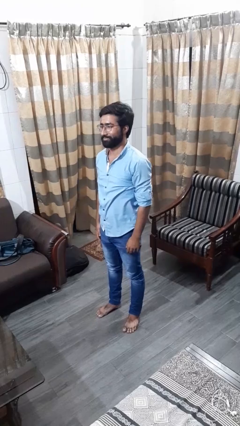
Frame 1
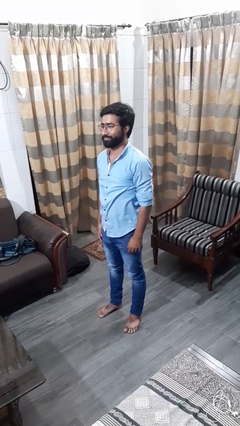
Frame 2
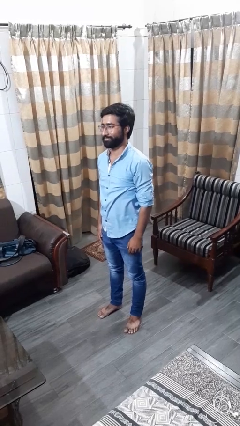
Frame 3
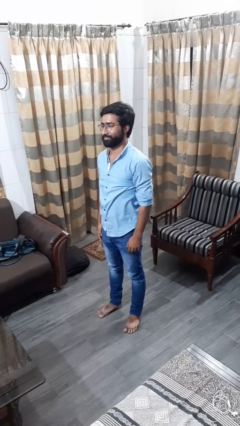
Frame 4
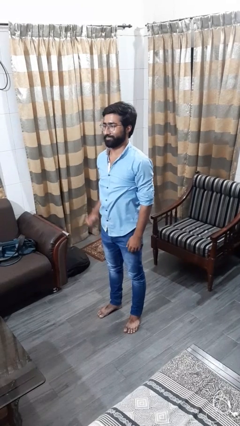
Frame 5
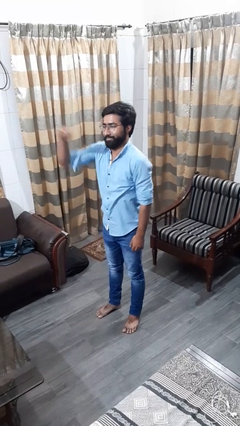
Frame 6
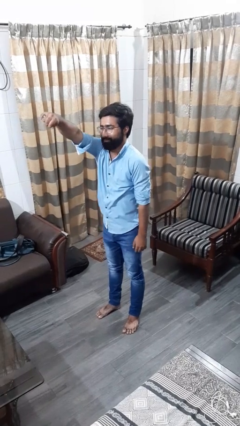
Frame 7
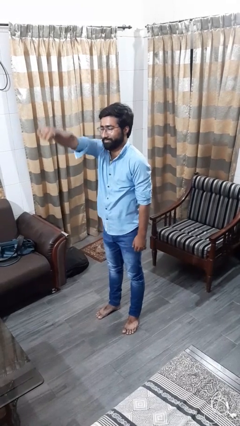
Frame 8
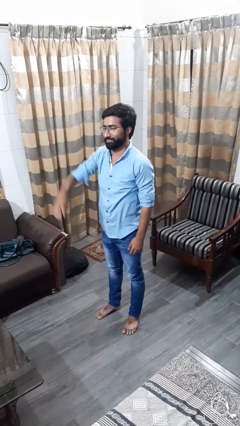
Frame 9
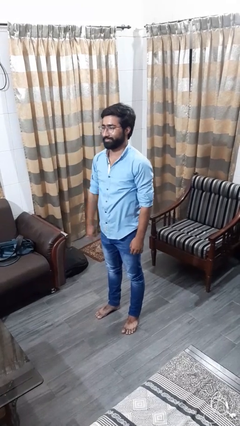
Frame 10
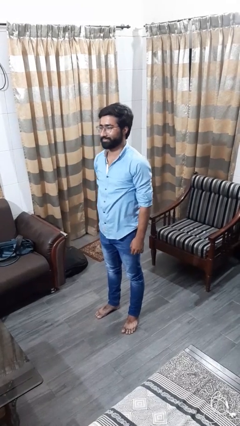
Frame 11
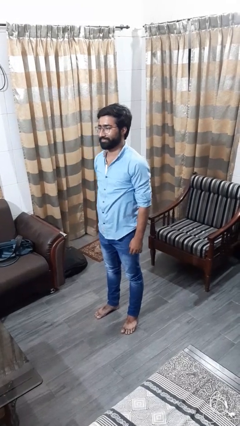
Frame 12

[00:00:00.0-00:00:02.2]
person punches

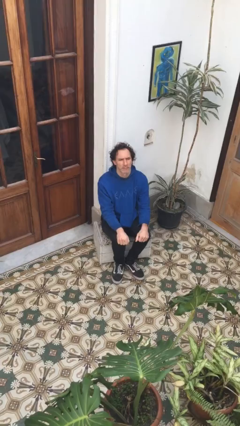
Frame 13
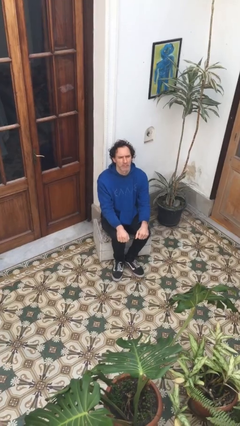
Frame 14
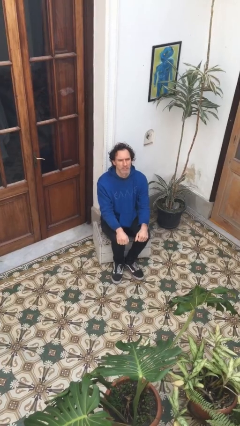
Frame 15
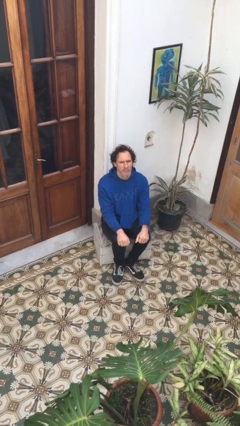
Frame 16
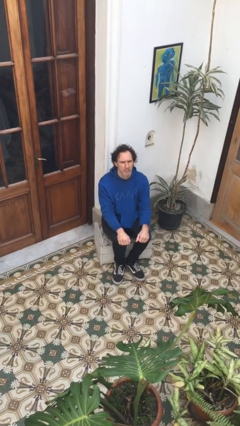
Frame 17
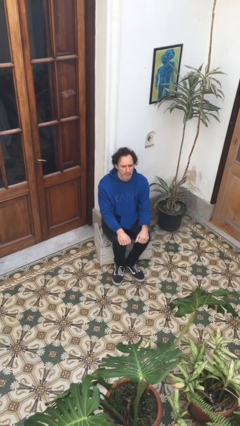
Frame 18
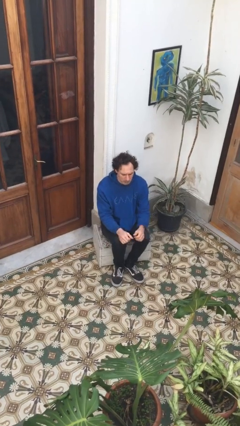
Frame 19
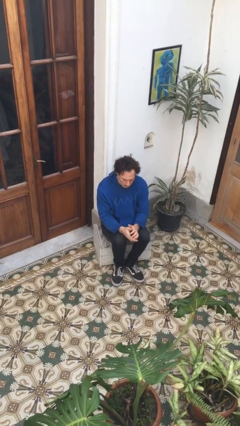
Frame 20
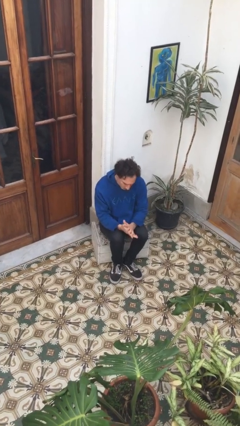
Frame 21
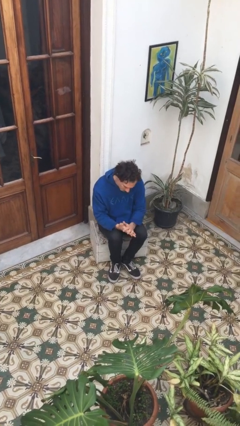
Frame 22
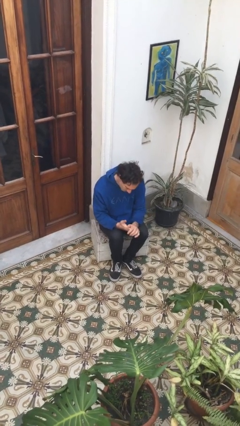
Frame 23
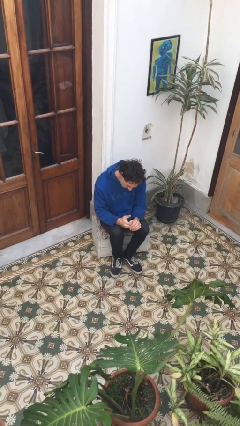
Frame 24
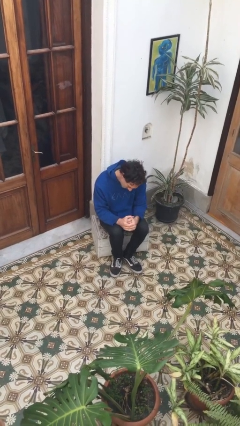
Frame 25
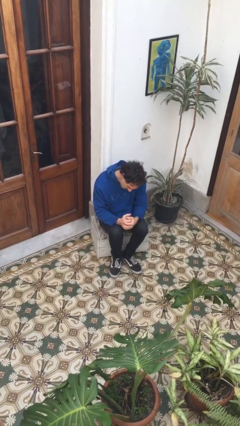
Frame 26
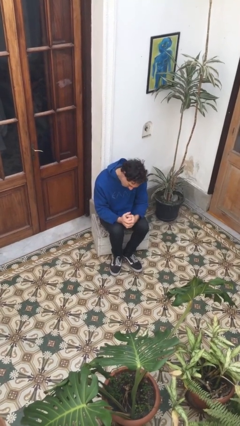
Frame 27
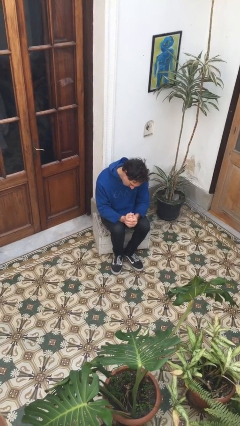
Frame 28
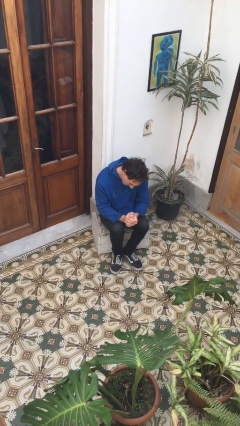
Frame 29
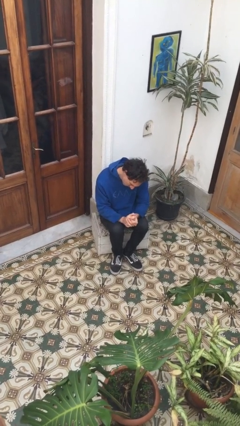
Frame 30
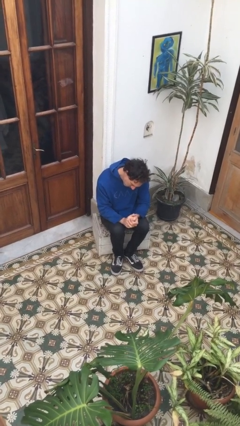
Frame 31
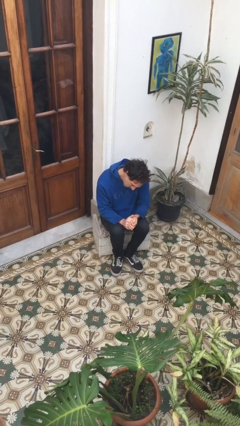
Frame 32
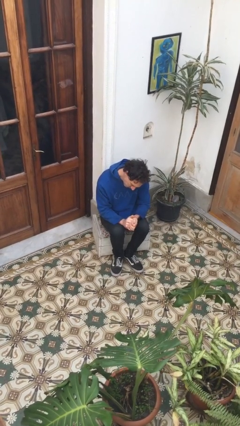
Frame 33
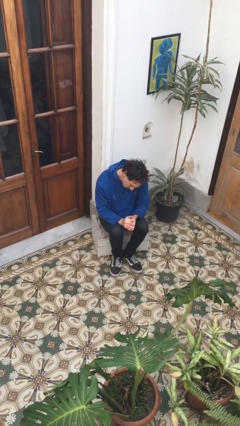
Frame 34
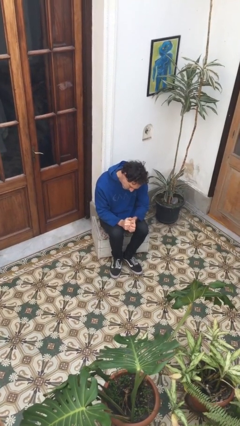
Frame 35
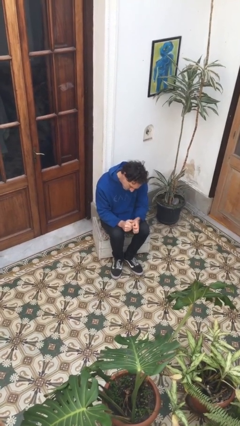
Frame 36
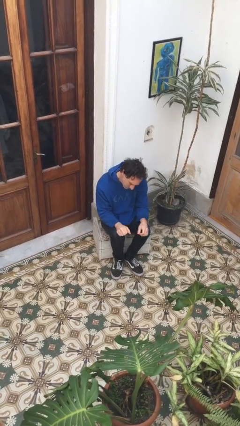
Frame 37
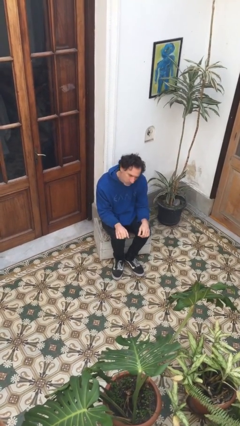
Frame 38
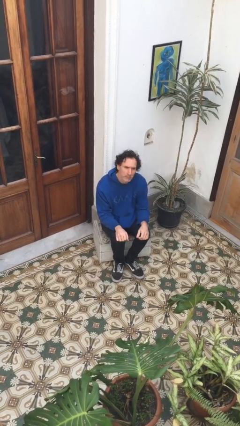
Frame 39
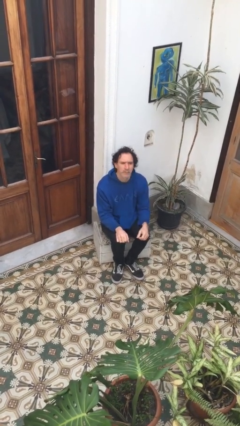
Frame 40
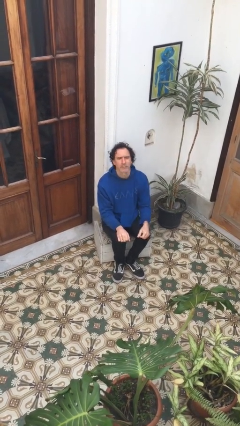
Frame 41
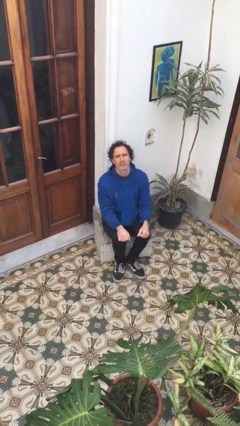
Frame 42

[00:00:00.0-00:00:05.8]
person looks at hands in lap

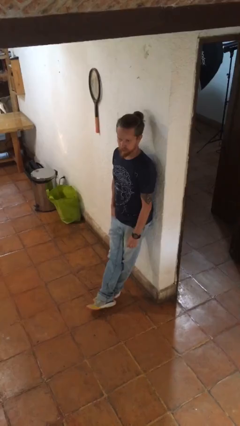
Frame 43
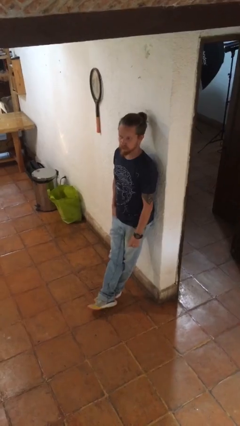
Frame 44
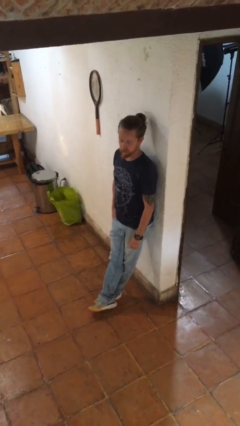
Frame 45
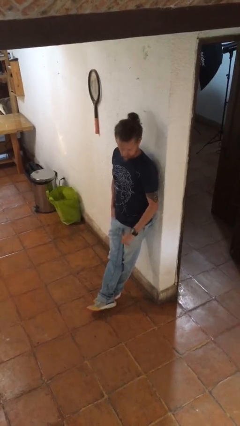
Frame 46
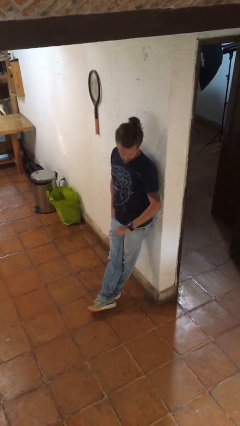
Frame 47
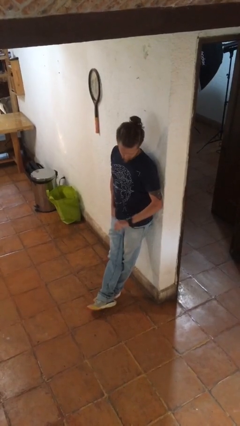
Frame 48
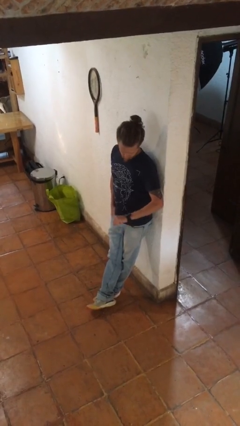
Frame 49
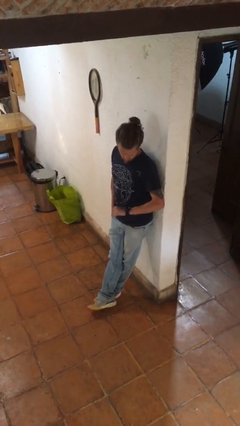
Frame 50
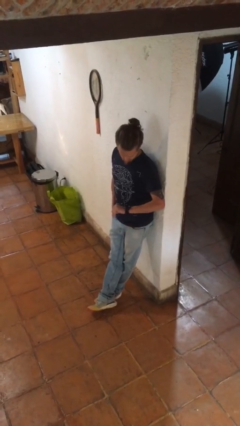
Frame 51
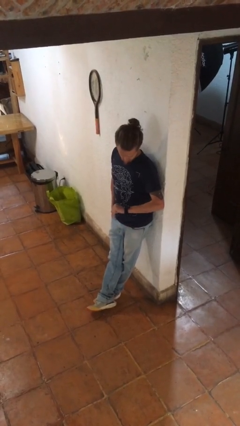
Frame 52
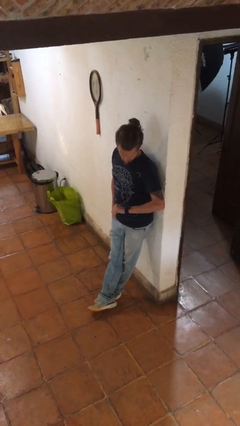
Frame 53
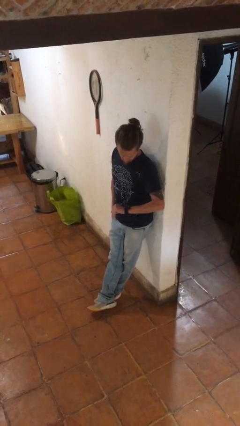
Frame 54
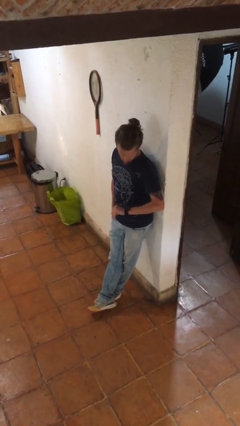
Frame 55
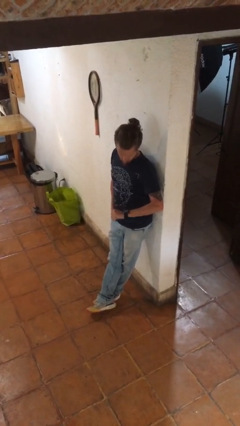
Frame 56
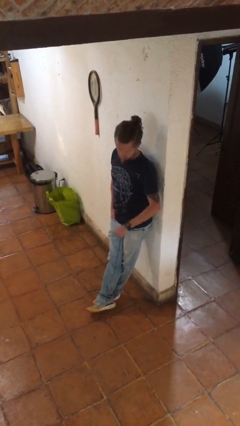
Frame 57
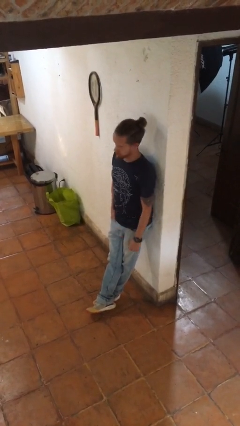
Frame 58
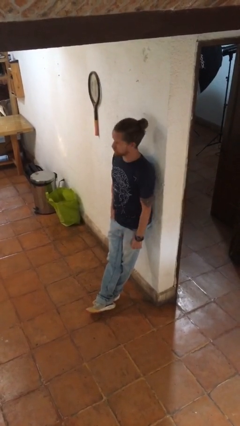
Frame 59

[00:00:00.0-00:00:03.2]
person looks at wristwatch

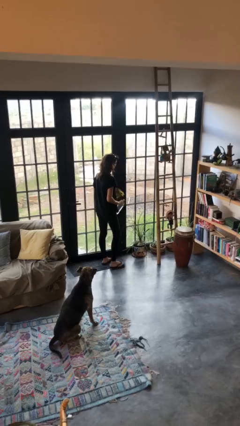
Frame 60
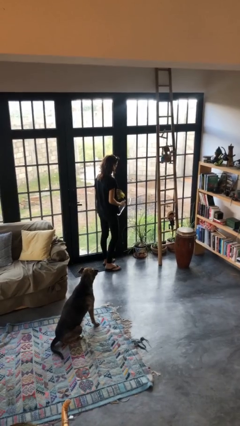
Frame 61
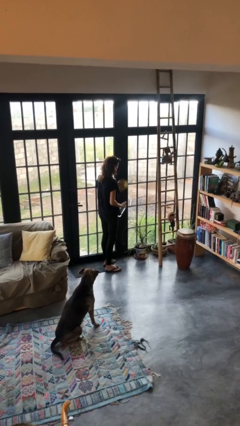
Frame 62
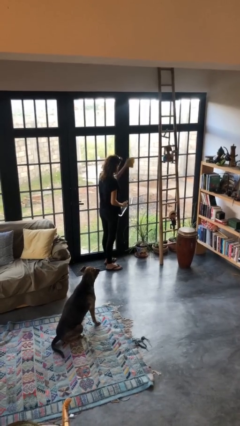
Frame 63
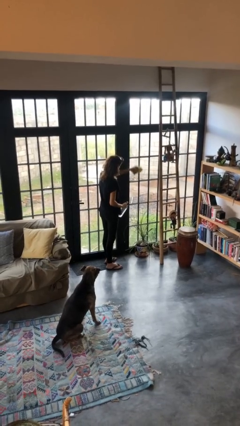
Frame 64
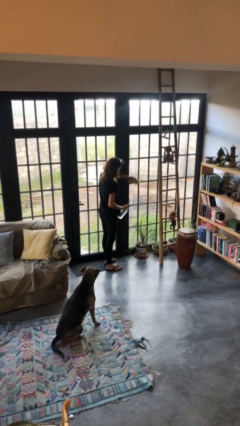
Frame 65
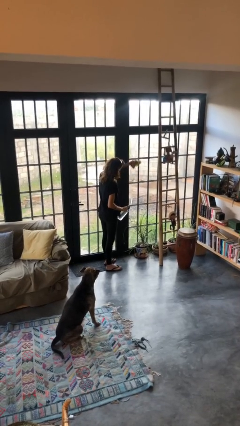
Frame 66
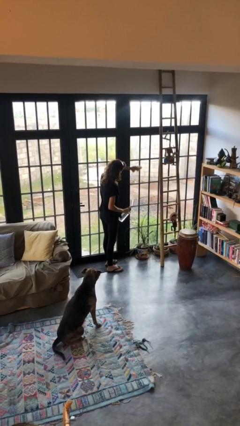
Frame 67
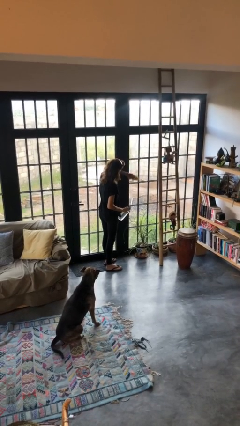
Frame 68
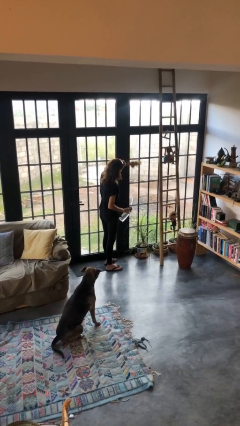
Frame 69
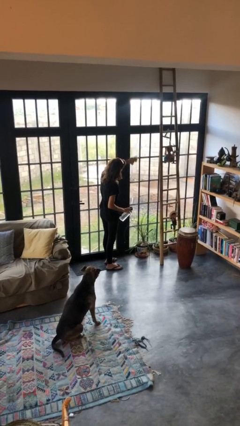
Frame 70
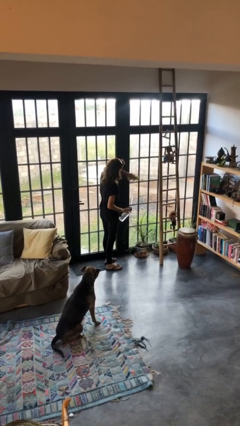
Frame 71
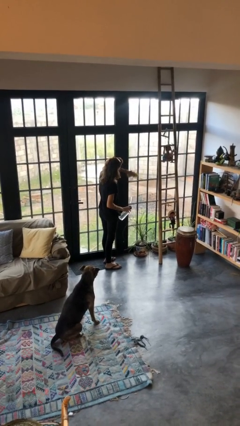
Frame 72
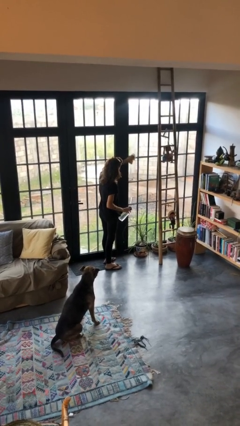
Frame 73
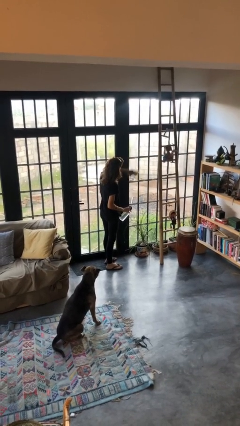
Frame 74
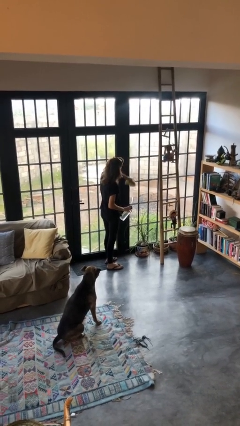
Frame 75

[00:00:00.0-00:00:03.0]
person washes window

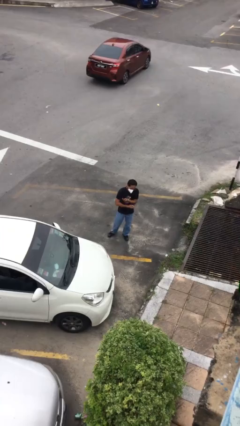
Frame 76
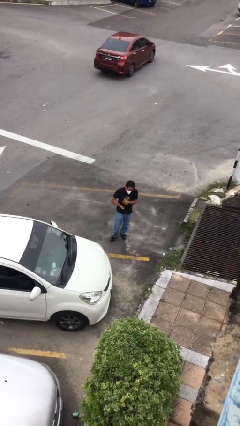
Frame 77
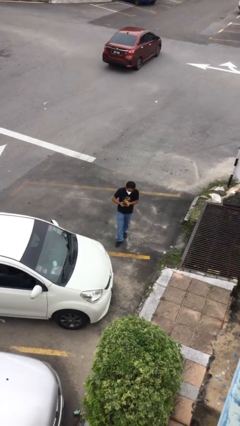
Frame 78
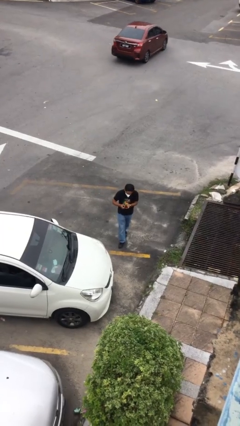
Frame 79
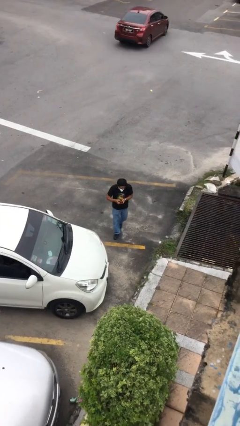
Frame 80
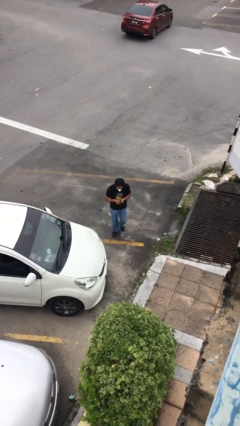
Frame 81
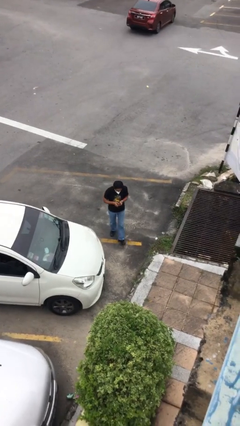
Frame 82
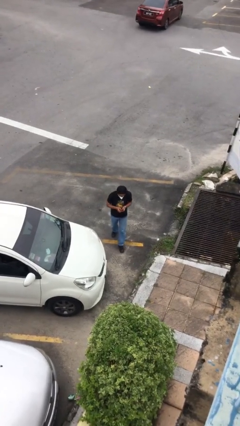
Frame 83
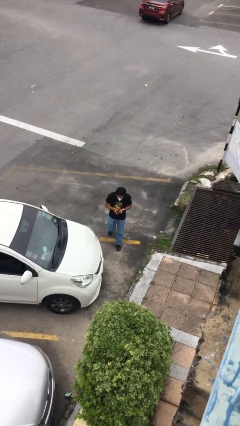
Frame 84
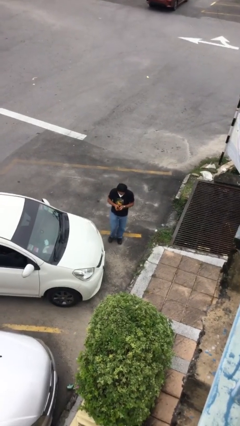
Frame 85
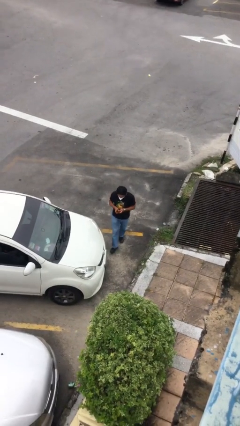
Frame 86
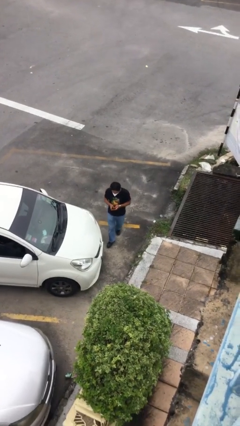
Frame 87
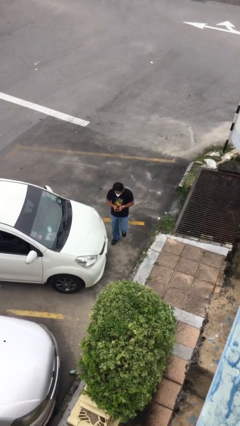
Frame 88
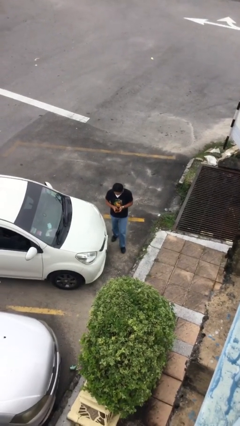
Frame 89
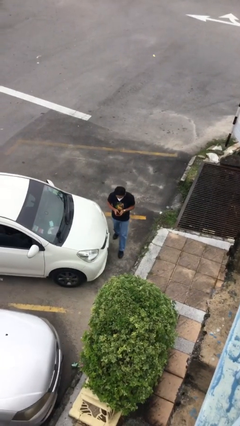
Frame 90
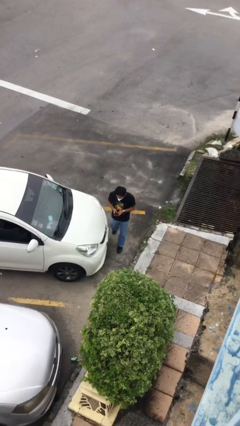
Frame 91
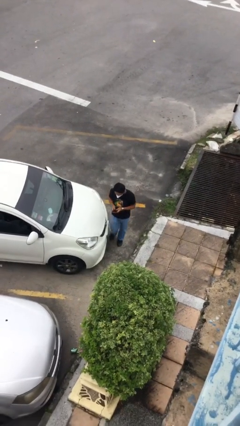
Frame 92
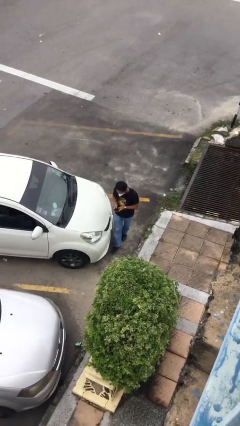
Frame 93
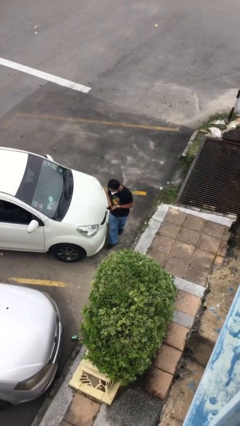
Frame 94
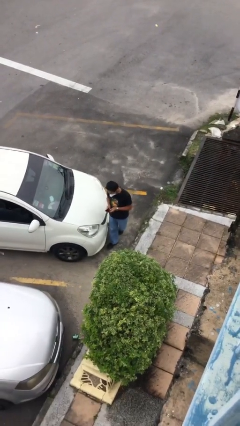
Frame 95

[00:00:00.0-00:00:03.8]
person texts on phone
